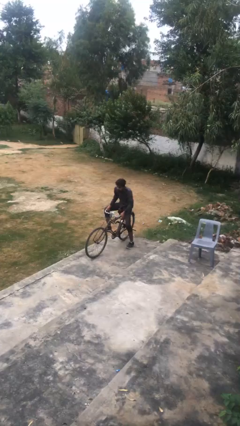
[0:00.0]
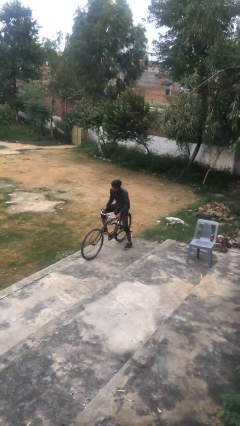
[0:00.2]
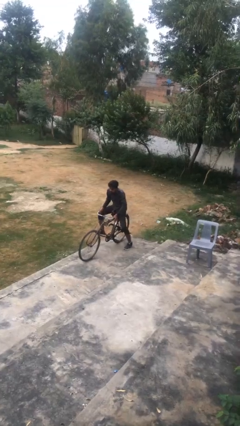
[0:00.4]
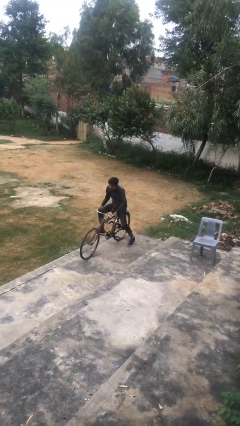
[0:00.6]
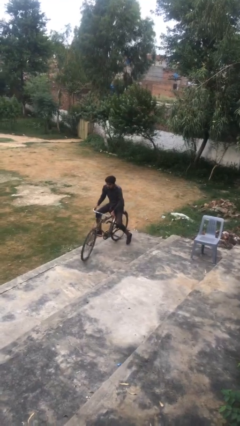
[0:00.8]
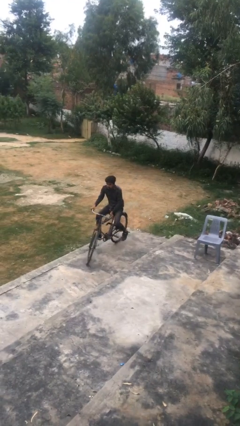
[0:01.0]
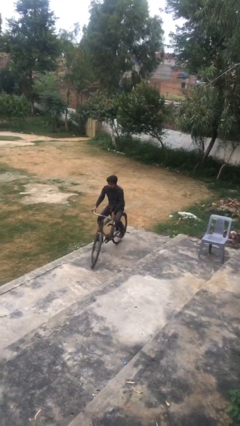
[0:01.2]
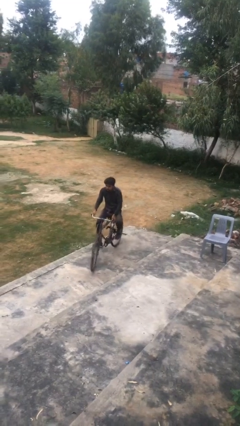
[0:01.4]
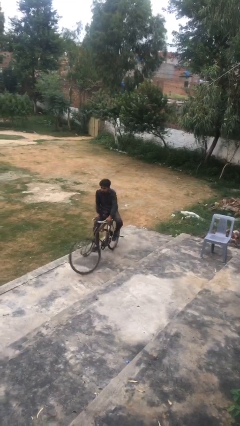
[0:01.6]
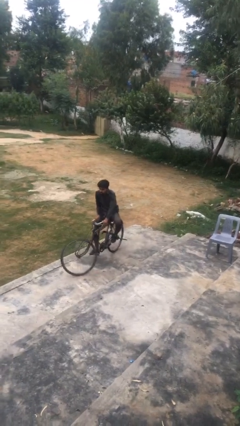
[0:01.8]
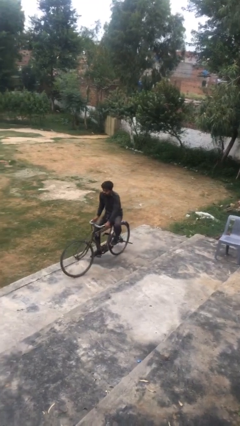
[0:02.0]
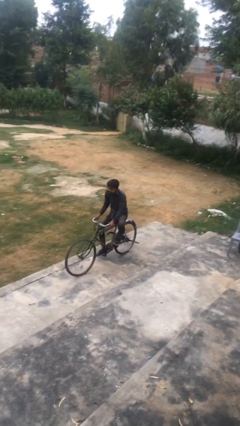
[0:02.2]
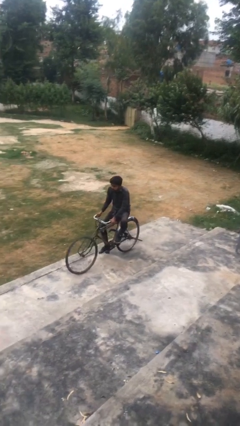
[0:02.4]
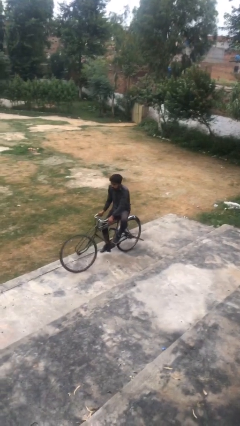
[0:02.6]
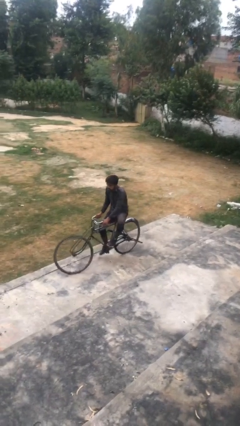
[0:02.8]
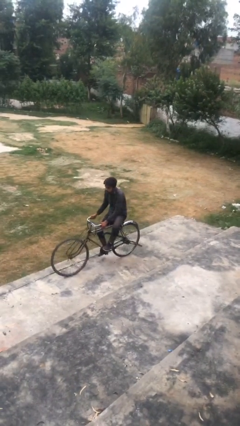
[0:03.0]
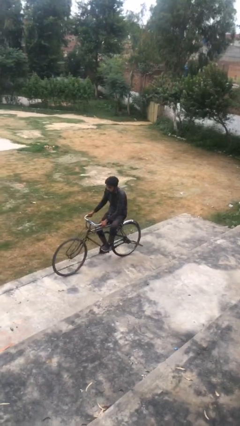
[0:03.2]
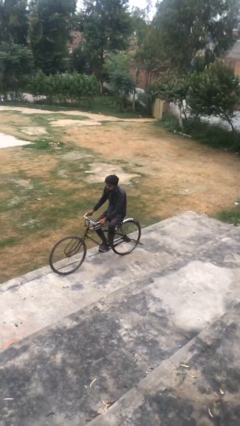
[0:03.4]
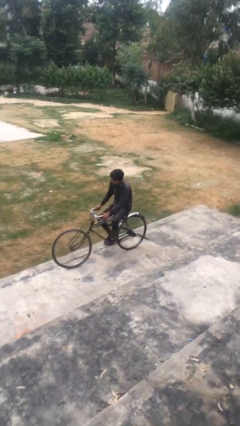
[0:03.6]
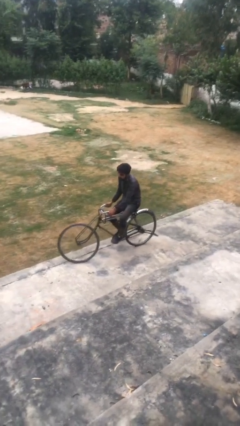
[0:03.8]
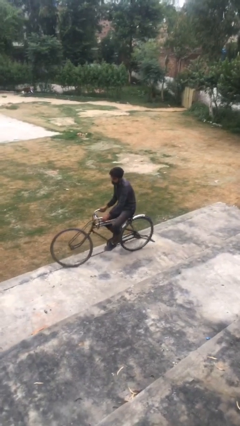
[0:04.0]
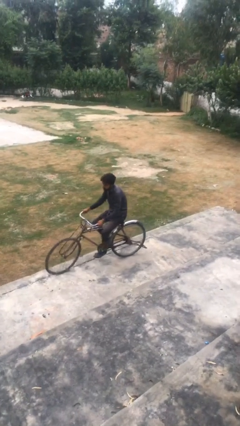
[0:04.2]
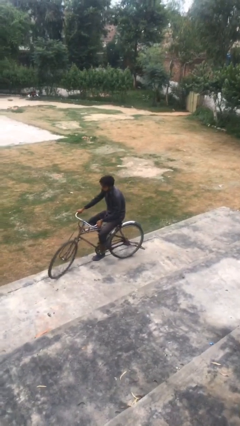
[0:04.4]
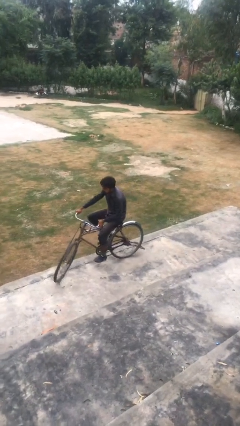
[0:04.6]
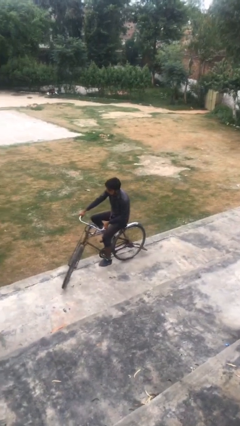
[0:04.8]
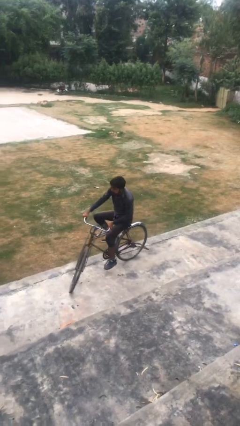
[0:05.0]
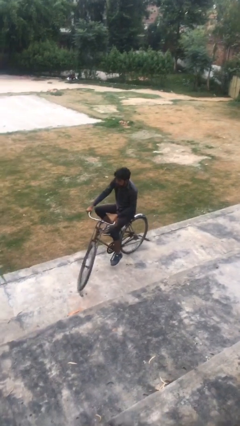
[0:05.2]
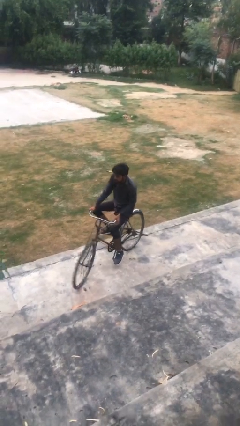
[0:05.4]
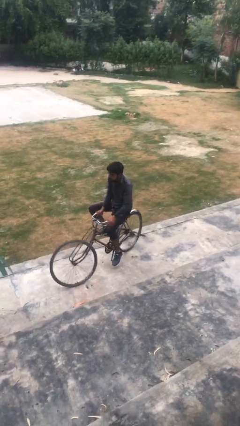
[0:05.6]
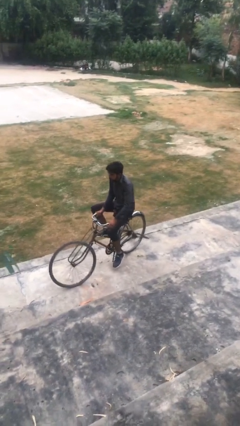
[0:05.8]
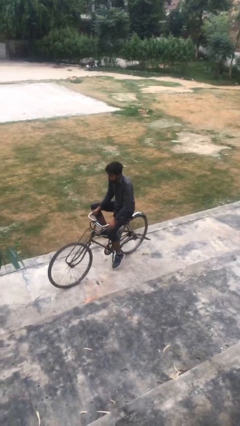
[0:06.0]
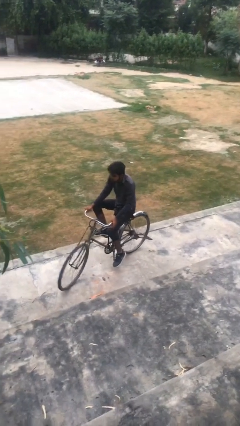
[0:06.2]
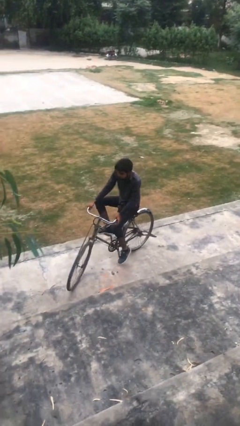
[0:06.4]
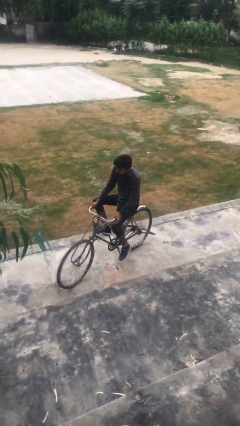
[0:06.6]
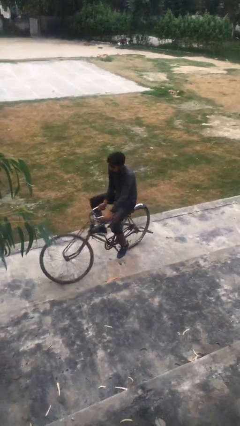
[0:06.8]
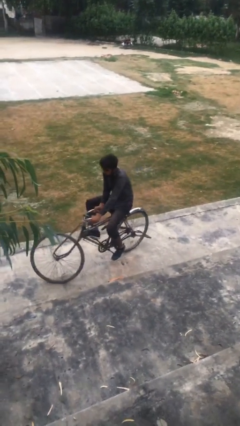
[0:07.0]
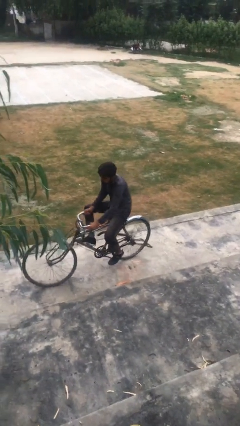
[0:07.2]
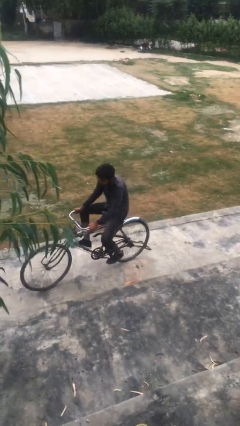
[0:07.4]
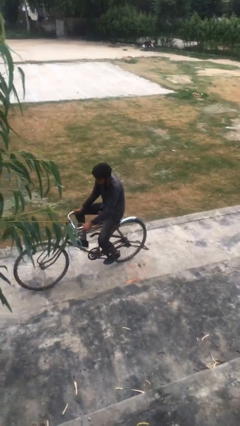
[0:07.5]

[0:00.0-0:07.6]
person rides bicycle

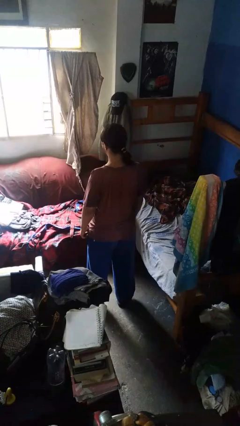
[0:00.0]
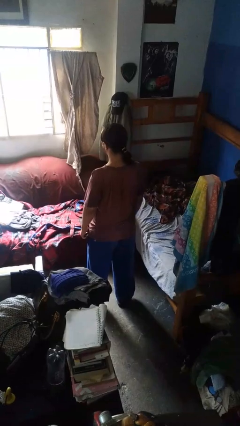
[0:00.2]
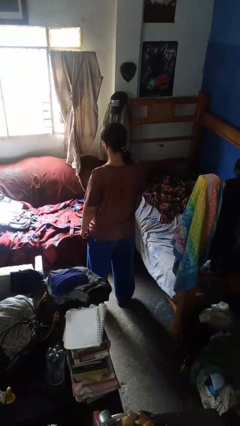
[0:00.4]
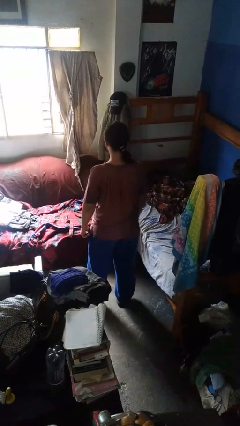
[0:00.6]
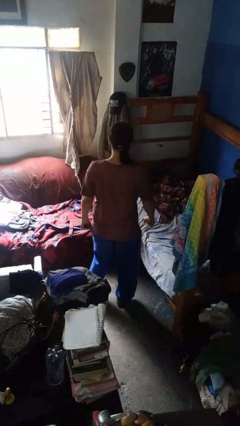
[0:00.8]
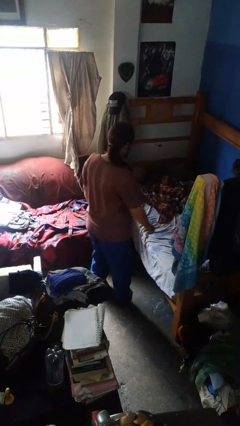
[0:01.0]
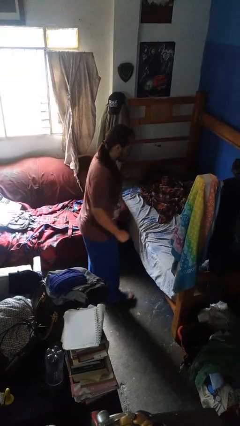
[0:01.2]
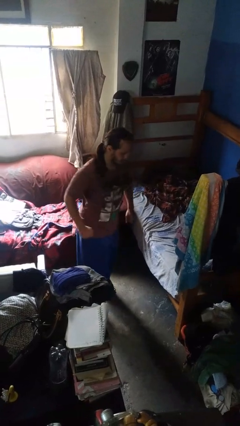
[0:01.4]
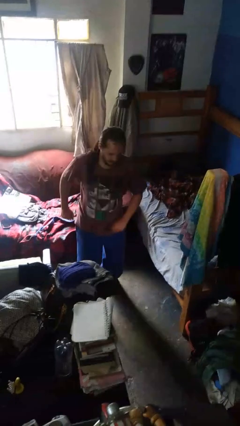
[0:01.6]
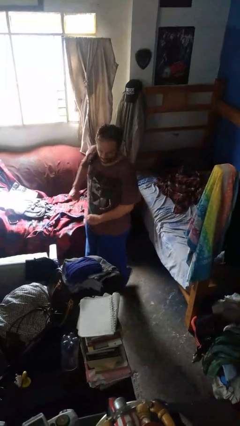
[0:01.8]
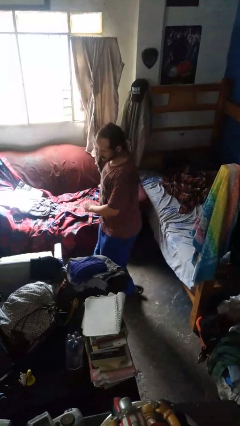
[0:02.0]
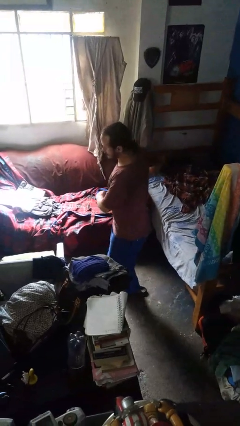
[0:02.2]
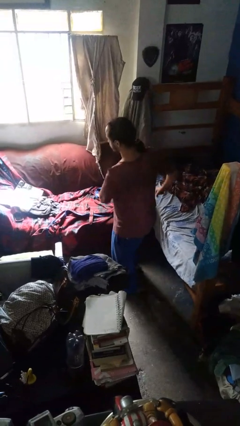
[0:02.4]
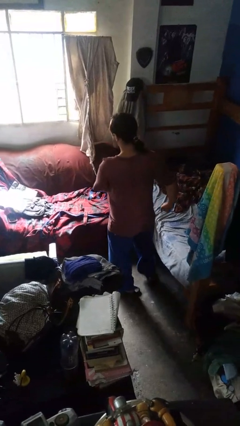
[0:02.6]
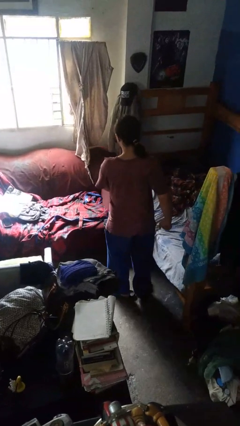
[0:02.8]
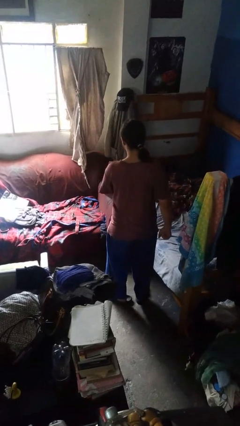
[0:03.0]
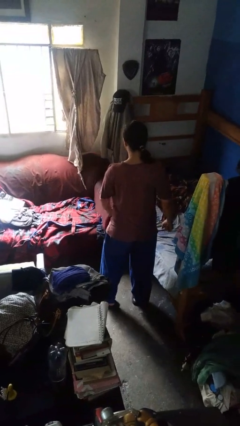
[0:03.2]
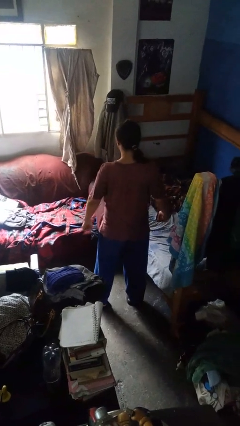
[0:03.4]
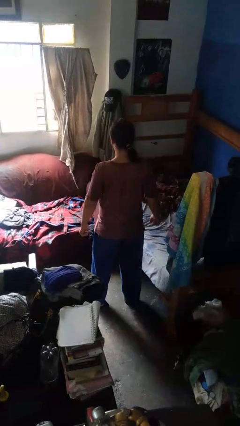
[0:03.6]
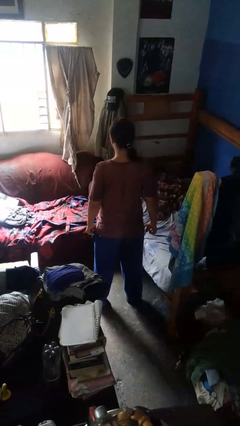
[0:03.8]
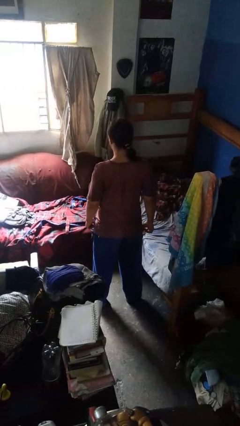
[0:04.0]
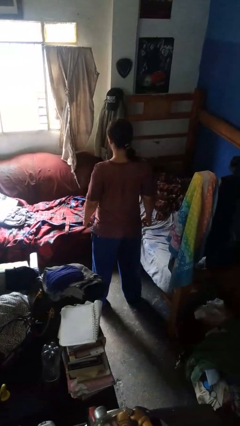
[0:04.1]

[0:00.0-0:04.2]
person twirls

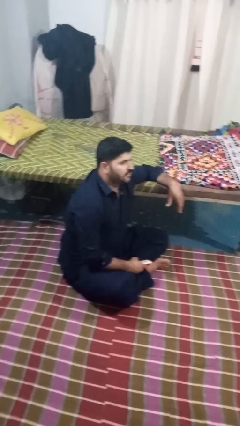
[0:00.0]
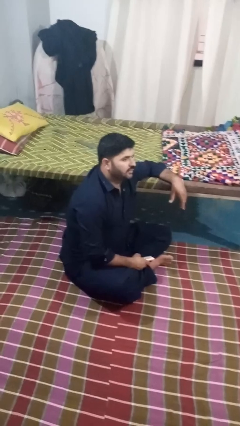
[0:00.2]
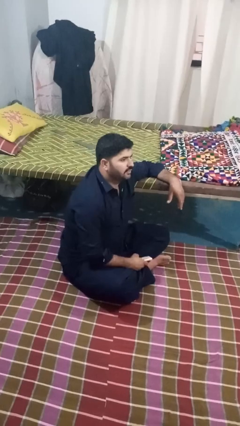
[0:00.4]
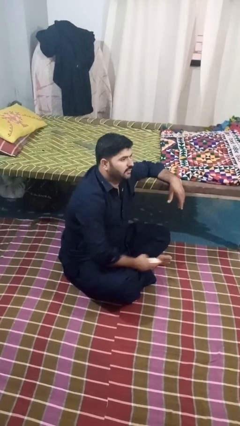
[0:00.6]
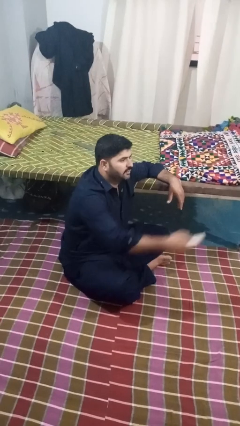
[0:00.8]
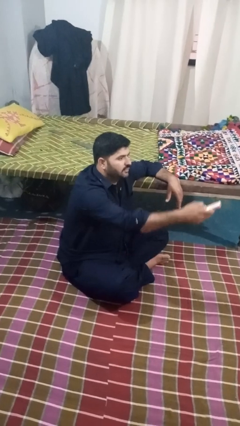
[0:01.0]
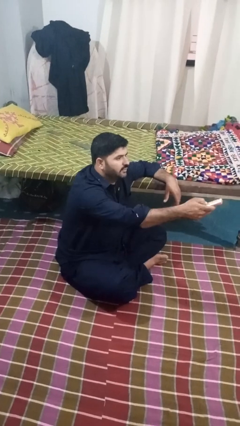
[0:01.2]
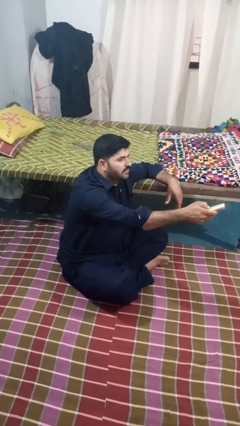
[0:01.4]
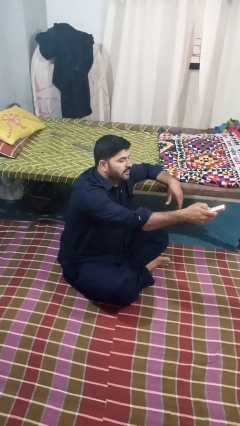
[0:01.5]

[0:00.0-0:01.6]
person uses television remote

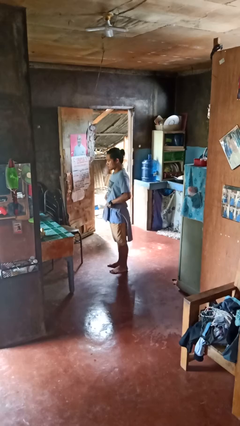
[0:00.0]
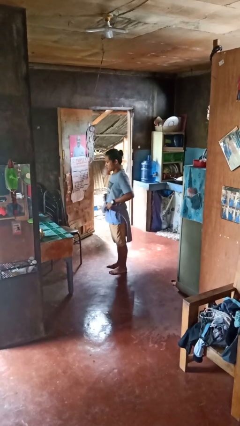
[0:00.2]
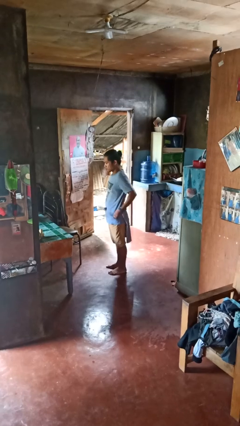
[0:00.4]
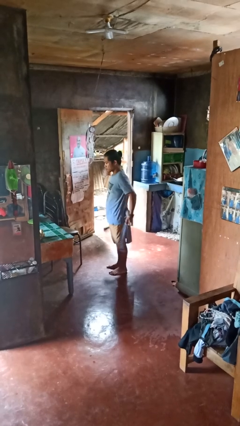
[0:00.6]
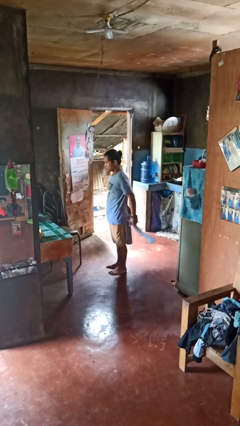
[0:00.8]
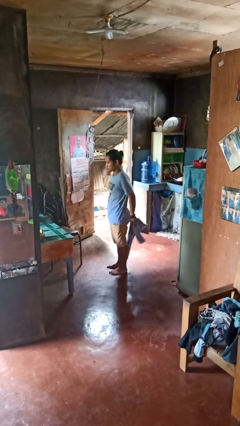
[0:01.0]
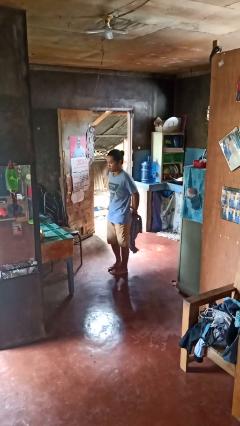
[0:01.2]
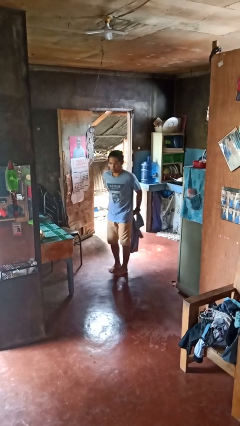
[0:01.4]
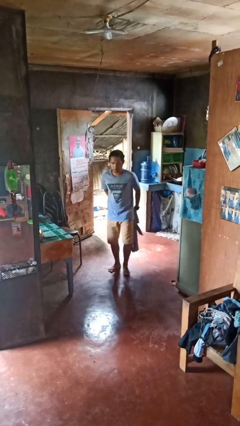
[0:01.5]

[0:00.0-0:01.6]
person unties jacket around waist

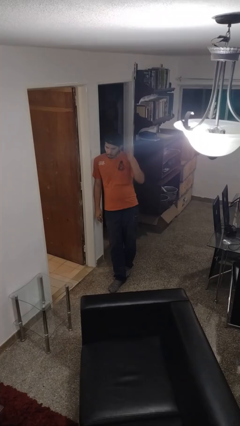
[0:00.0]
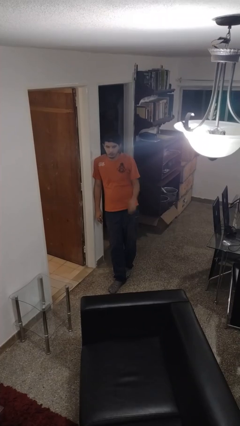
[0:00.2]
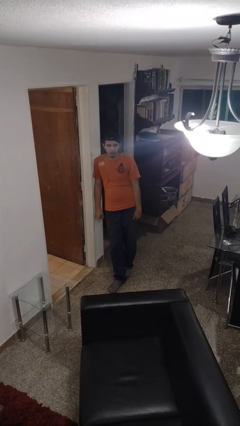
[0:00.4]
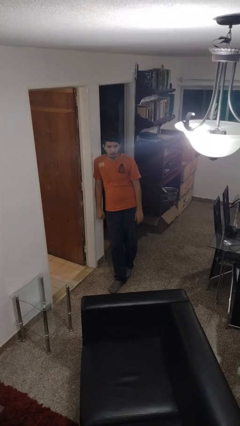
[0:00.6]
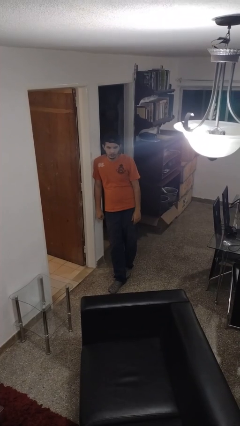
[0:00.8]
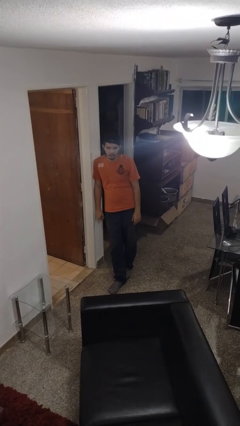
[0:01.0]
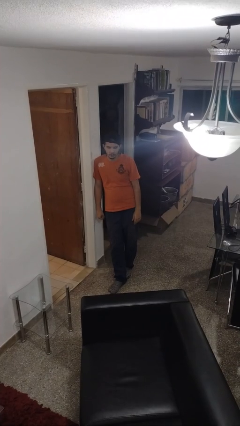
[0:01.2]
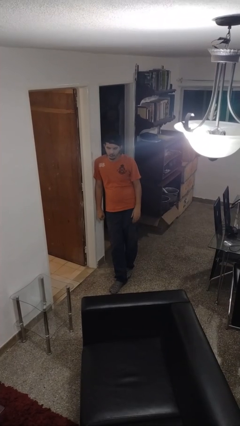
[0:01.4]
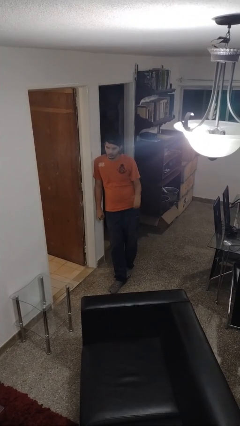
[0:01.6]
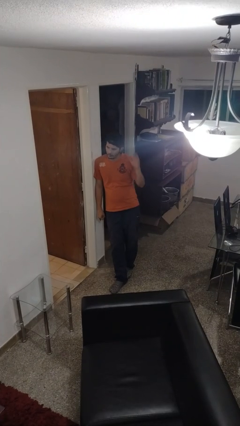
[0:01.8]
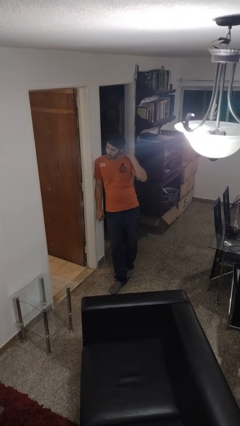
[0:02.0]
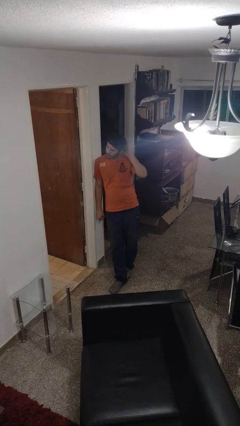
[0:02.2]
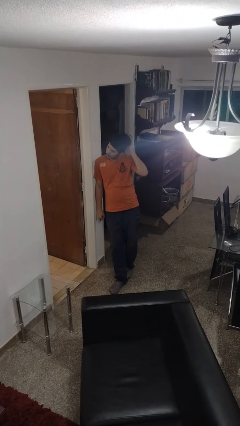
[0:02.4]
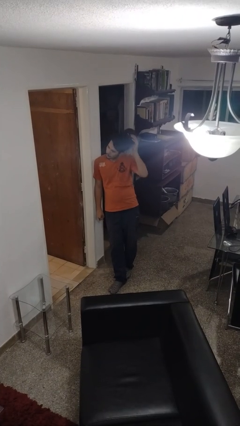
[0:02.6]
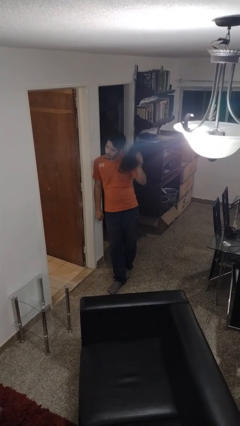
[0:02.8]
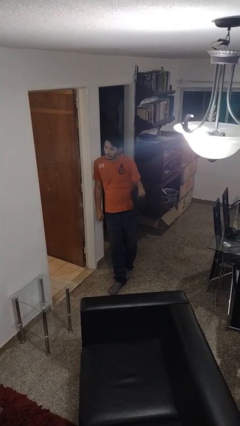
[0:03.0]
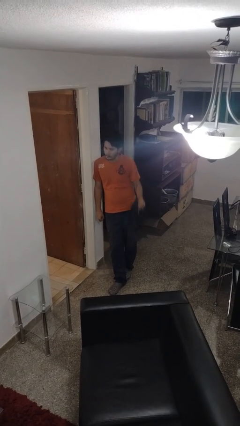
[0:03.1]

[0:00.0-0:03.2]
person takes off hat
